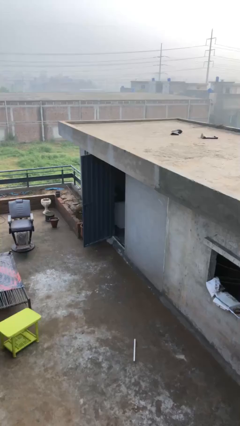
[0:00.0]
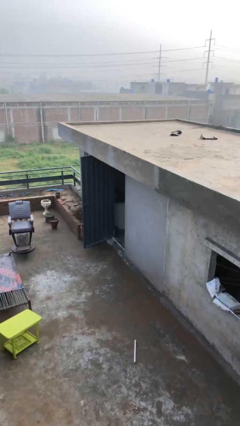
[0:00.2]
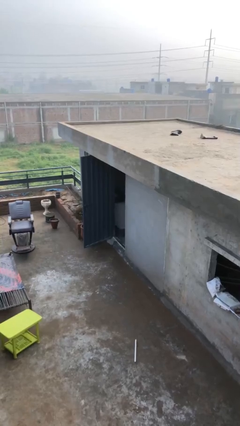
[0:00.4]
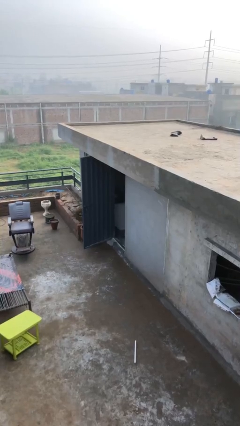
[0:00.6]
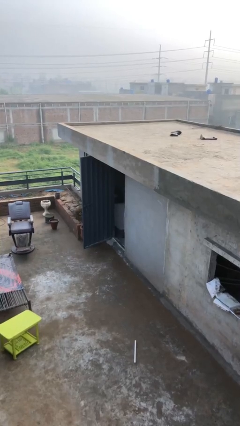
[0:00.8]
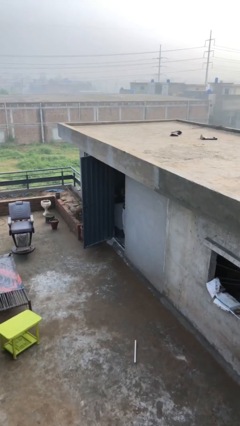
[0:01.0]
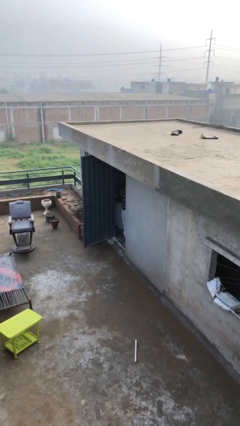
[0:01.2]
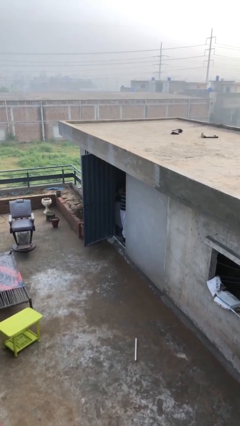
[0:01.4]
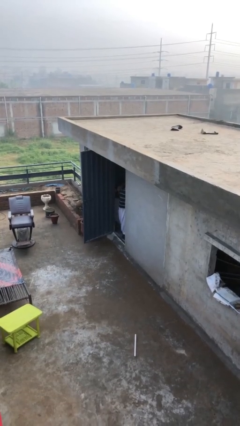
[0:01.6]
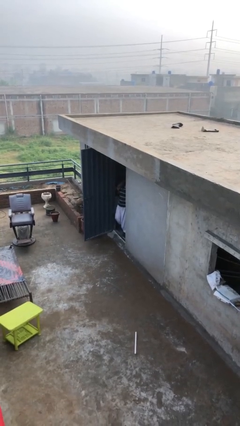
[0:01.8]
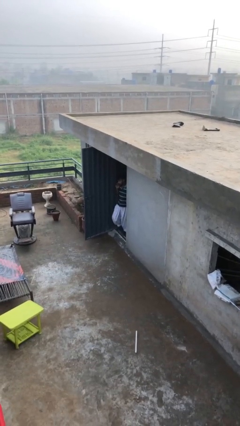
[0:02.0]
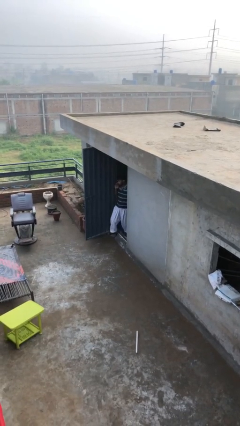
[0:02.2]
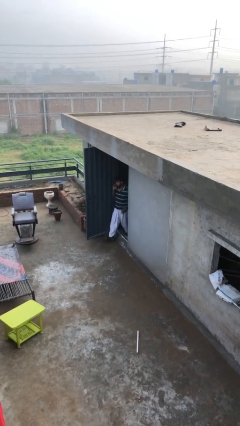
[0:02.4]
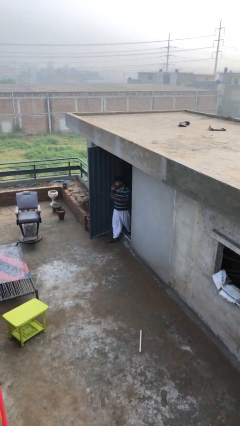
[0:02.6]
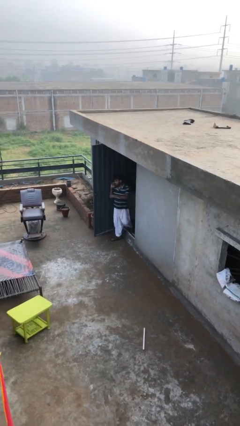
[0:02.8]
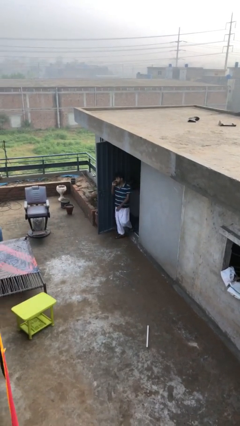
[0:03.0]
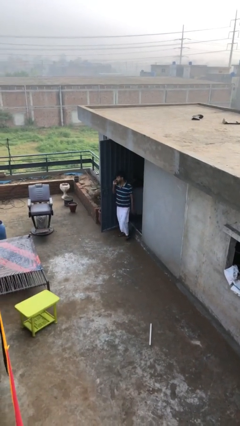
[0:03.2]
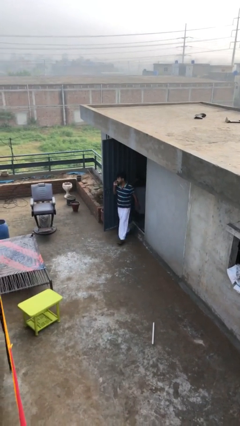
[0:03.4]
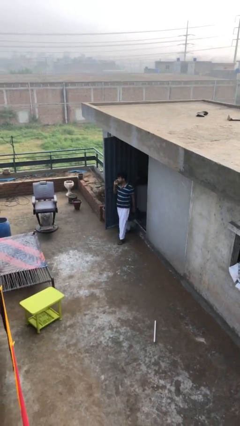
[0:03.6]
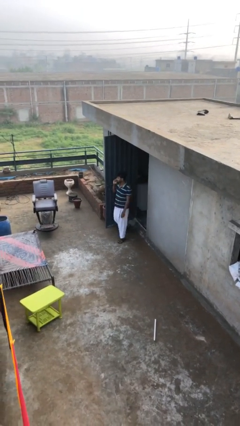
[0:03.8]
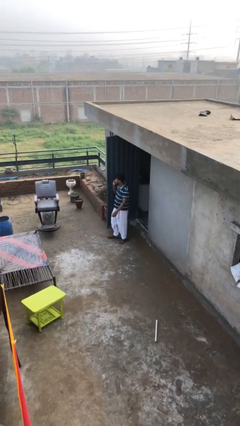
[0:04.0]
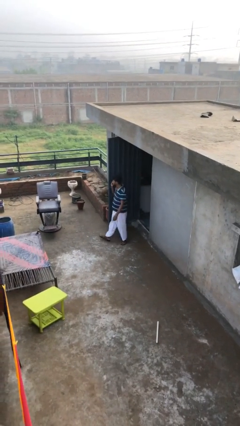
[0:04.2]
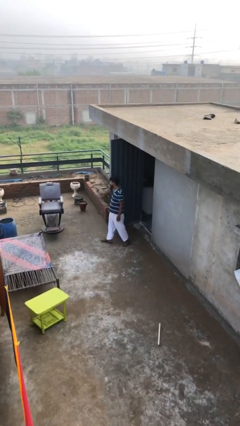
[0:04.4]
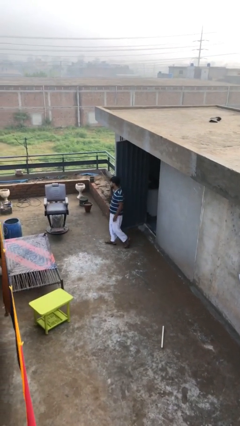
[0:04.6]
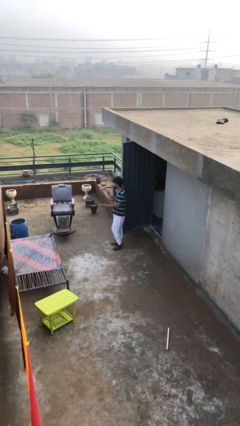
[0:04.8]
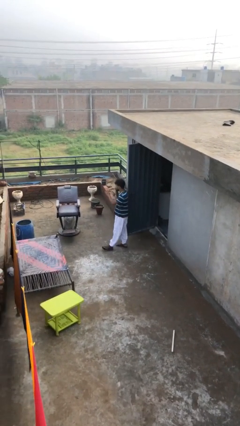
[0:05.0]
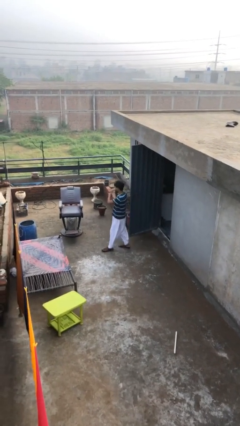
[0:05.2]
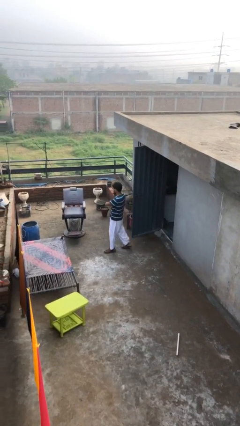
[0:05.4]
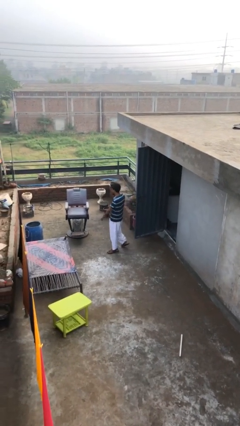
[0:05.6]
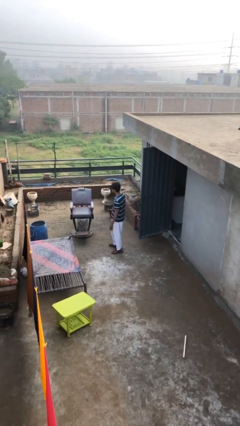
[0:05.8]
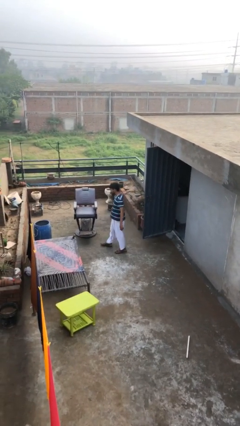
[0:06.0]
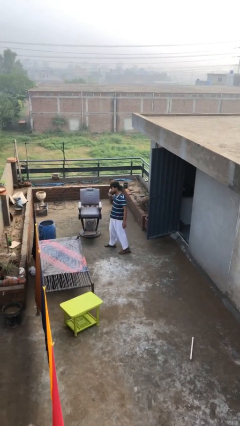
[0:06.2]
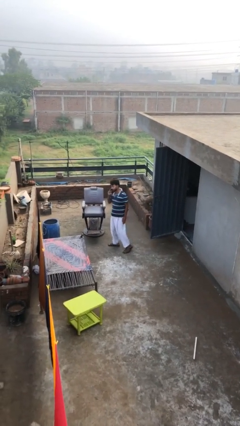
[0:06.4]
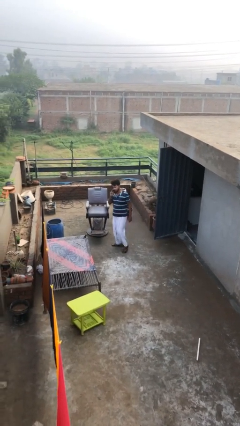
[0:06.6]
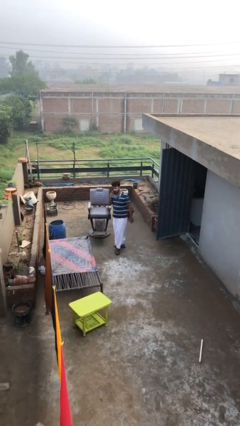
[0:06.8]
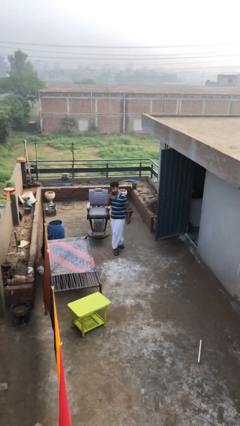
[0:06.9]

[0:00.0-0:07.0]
person enters scene through structure

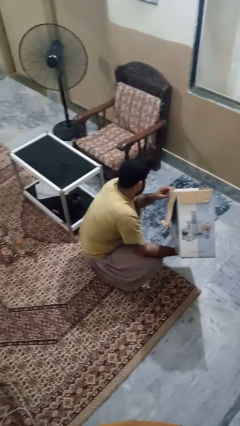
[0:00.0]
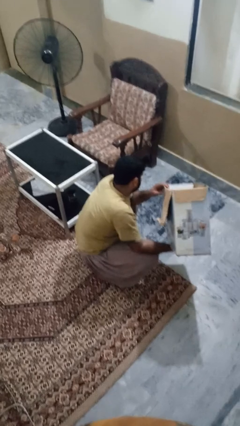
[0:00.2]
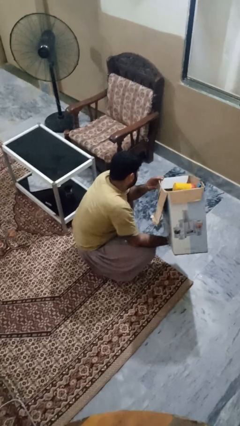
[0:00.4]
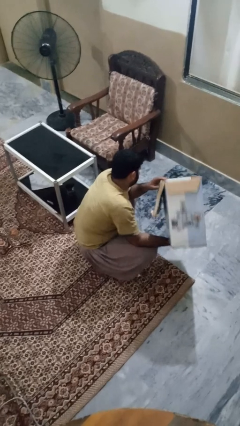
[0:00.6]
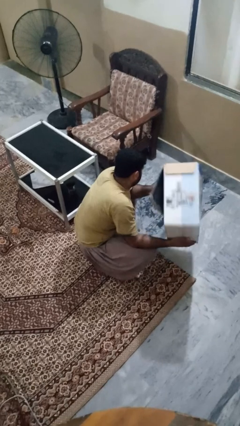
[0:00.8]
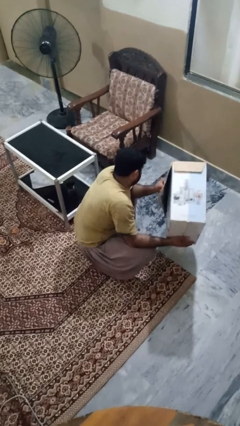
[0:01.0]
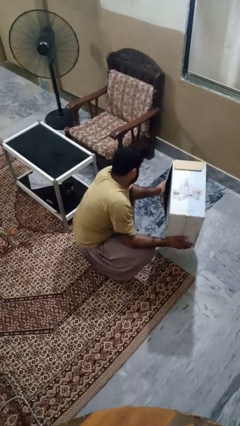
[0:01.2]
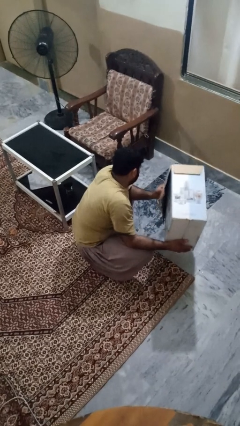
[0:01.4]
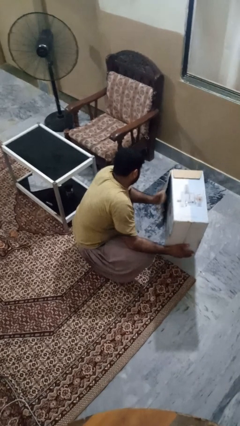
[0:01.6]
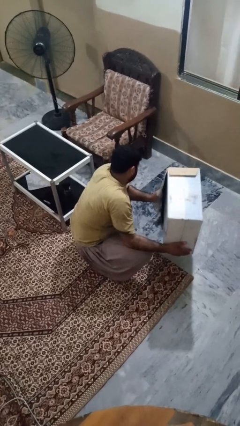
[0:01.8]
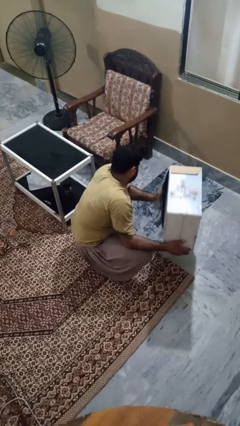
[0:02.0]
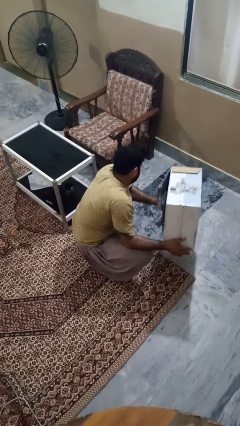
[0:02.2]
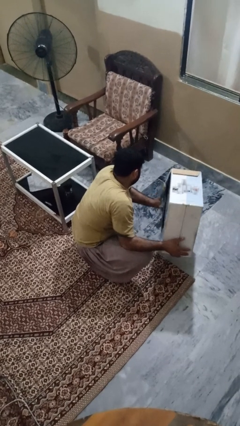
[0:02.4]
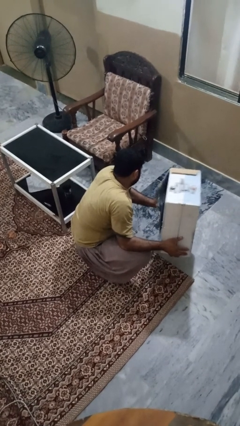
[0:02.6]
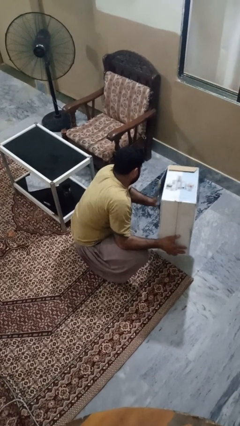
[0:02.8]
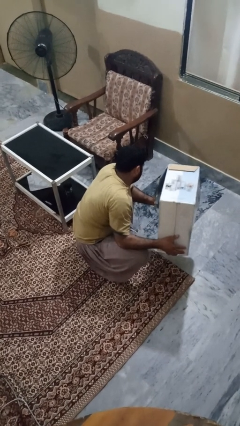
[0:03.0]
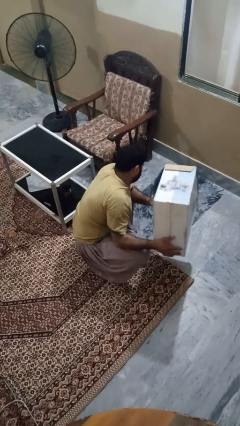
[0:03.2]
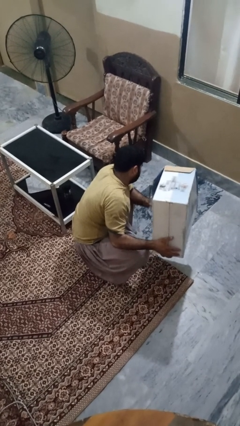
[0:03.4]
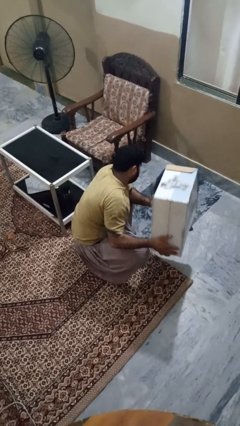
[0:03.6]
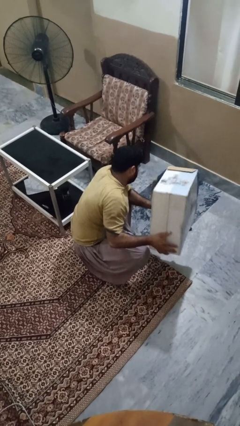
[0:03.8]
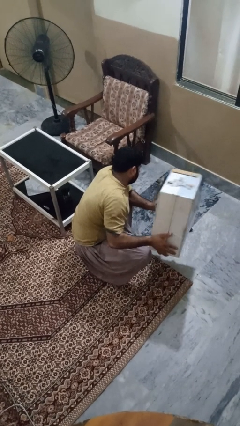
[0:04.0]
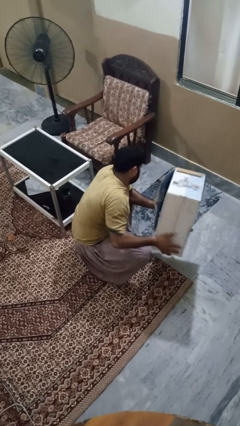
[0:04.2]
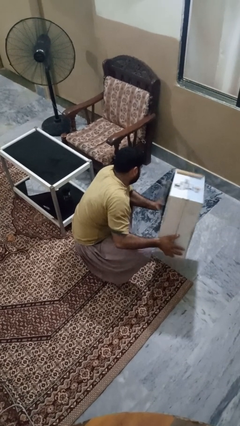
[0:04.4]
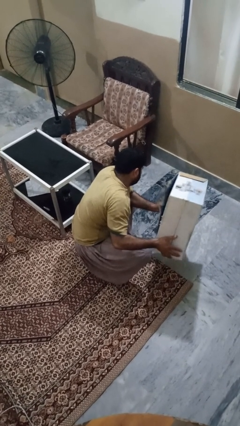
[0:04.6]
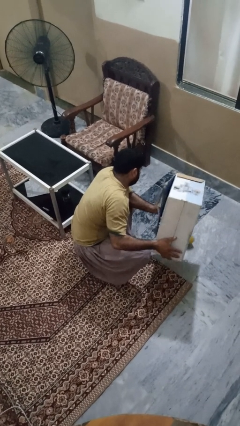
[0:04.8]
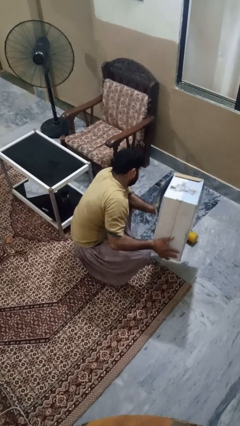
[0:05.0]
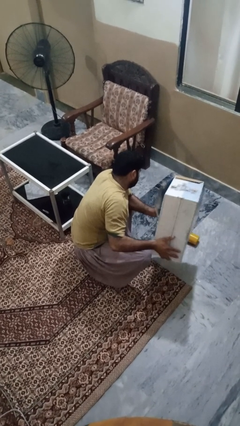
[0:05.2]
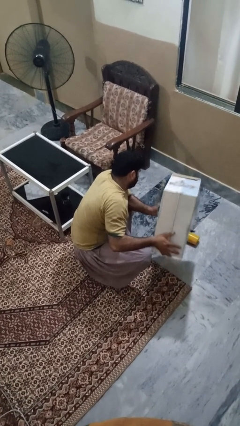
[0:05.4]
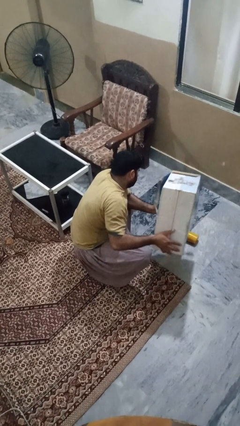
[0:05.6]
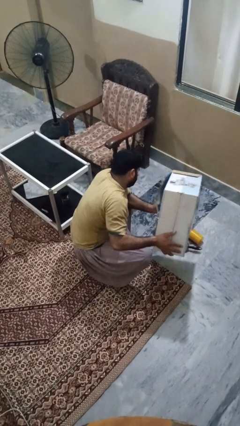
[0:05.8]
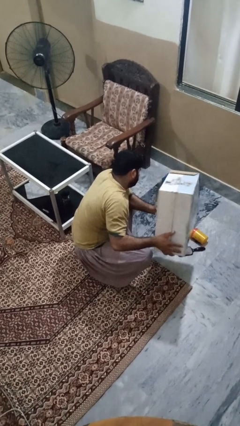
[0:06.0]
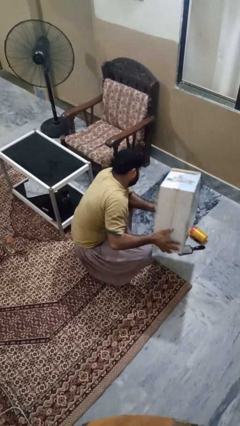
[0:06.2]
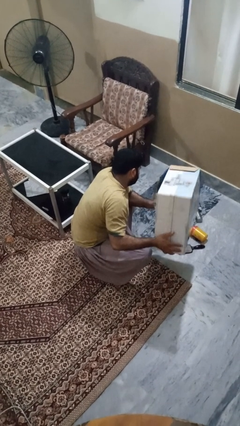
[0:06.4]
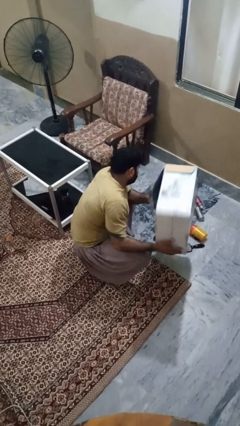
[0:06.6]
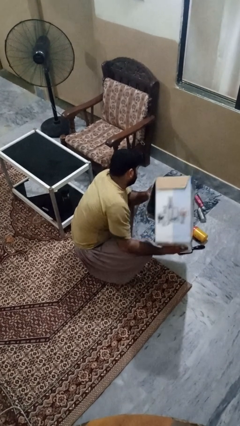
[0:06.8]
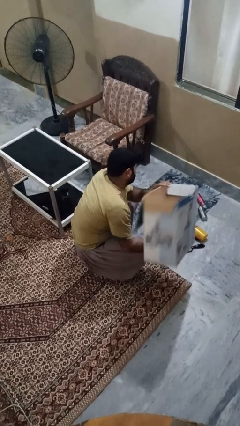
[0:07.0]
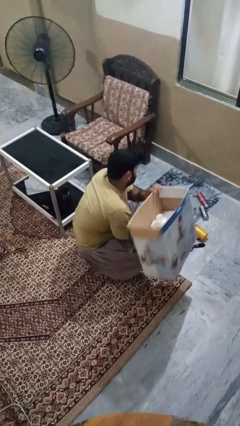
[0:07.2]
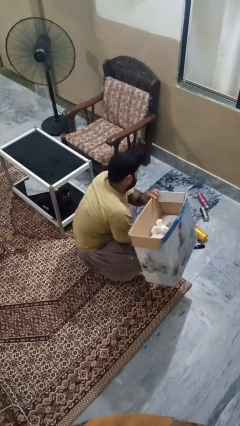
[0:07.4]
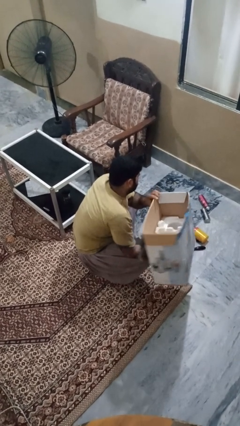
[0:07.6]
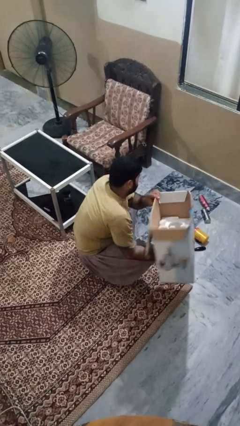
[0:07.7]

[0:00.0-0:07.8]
person unloads box onto floor

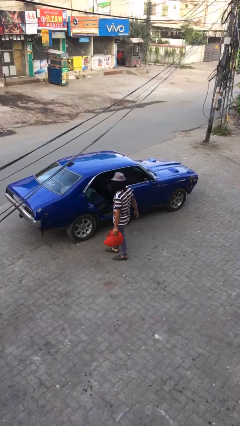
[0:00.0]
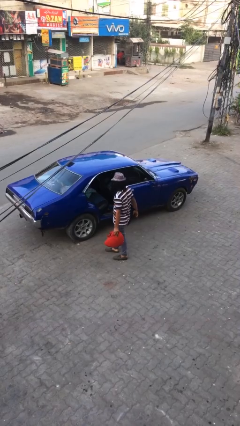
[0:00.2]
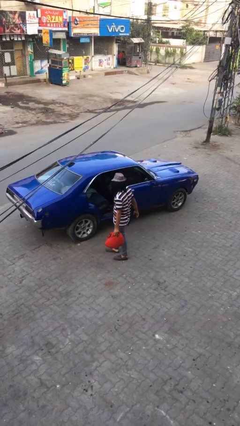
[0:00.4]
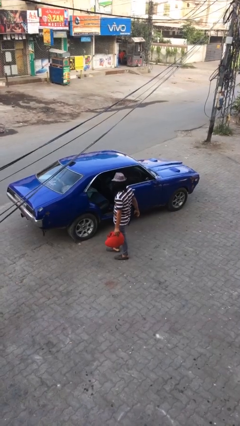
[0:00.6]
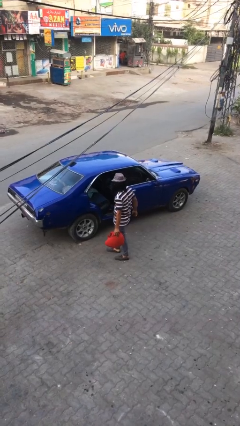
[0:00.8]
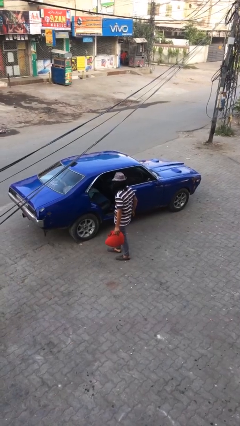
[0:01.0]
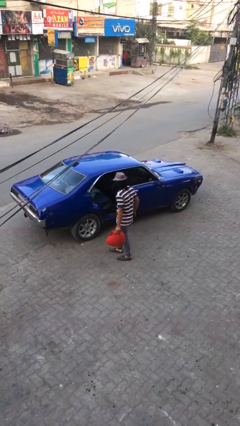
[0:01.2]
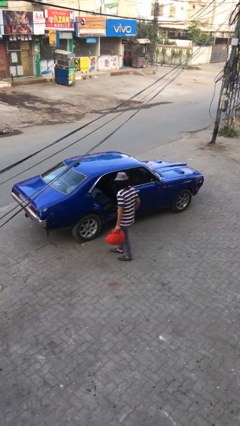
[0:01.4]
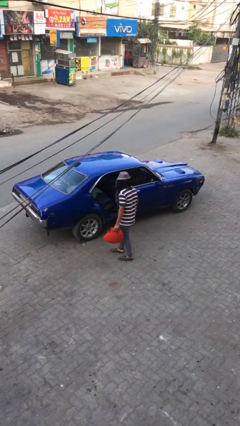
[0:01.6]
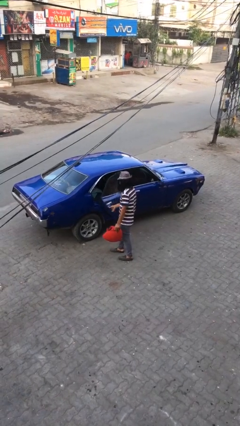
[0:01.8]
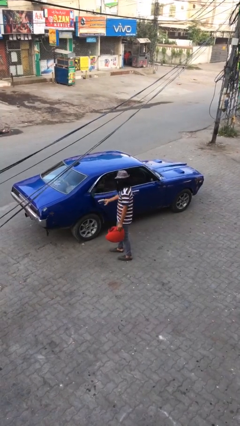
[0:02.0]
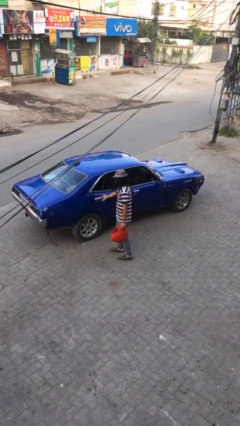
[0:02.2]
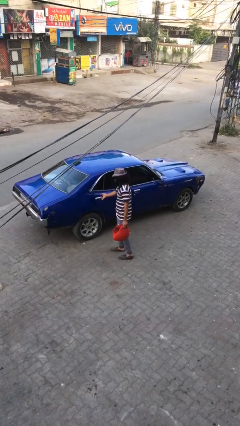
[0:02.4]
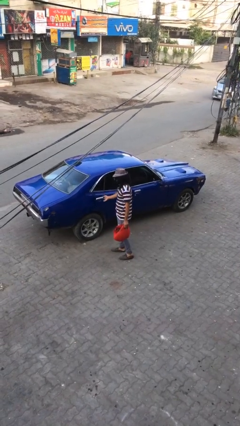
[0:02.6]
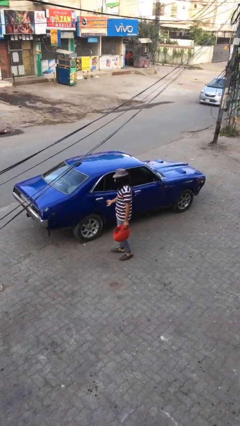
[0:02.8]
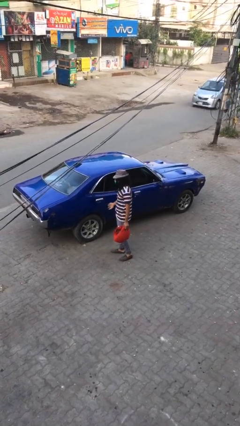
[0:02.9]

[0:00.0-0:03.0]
person closes car door
